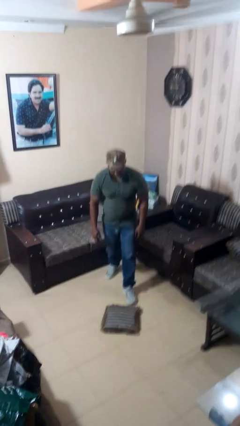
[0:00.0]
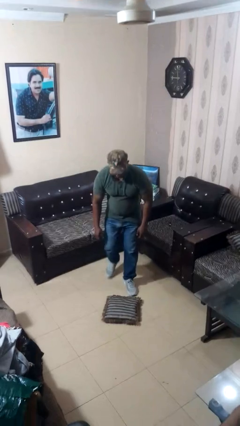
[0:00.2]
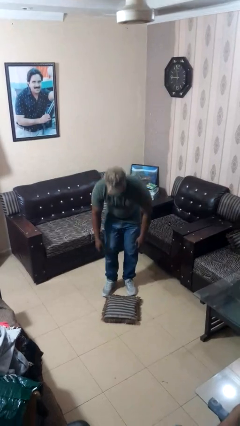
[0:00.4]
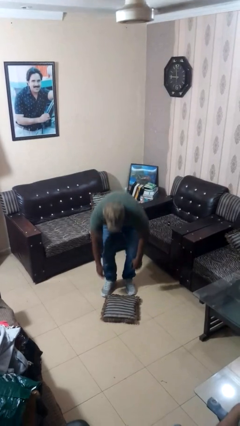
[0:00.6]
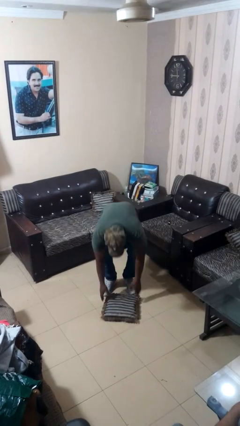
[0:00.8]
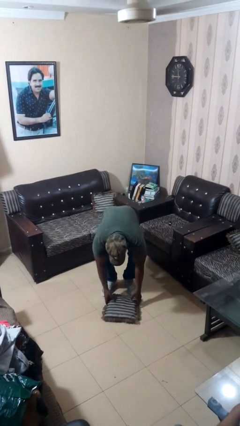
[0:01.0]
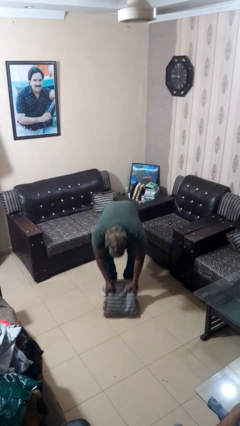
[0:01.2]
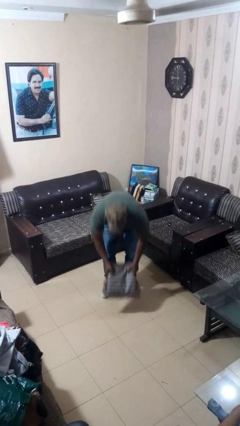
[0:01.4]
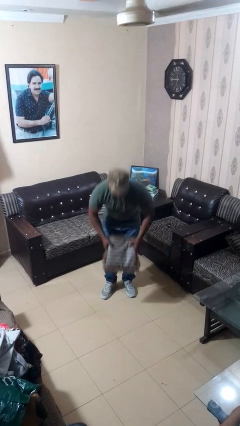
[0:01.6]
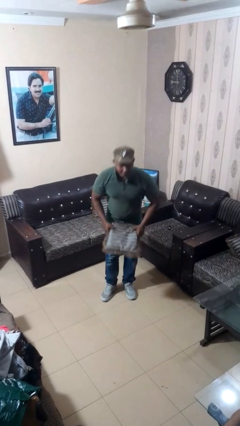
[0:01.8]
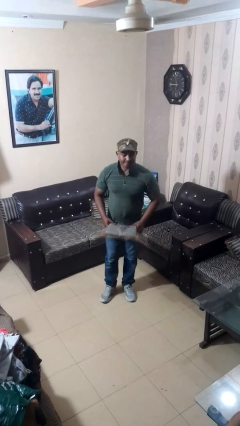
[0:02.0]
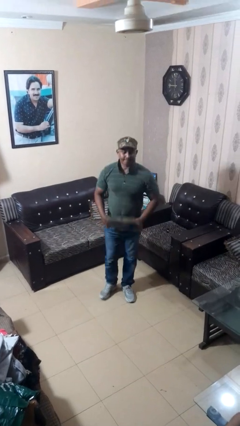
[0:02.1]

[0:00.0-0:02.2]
person picks up object from floor

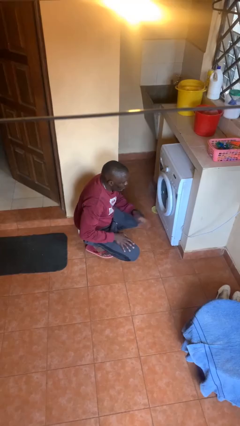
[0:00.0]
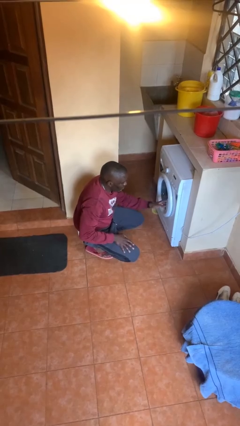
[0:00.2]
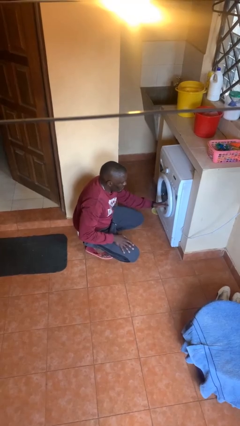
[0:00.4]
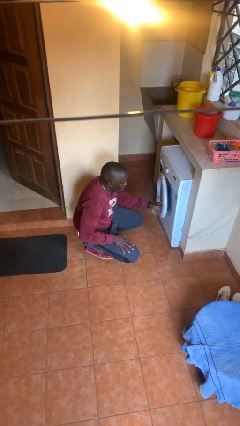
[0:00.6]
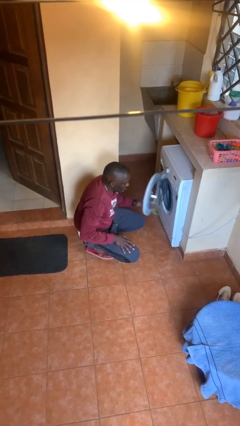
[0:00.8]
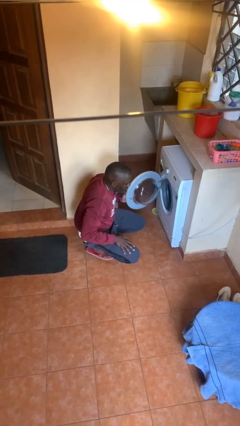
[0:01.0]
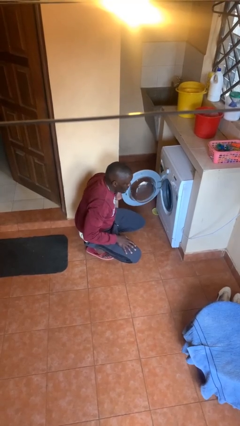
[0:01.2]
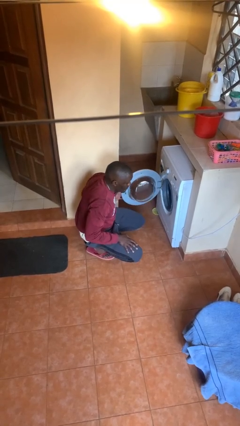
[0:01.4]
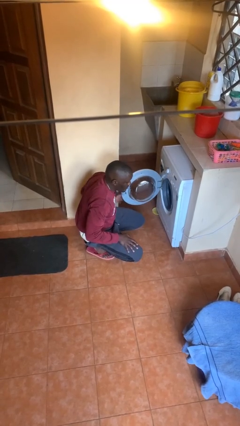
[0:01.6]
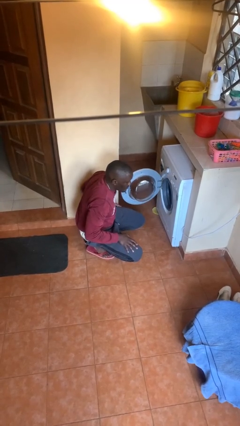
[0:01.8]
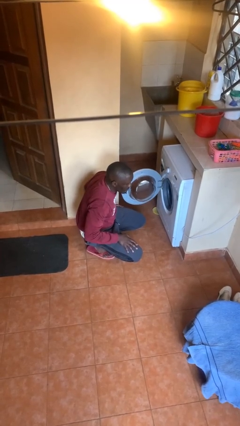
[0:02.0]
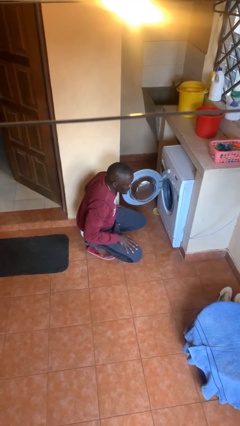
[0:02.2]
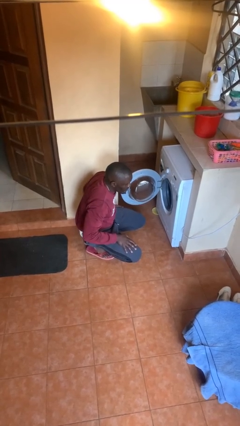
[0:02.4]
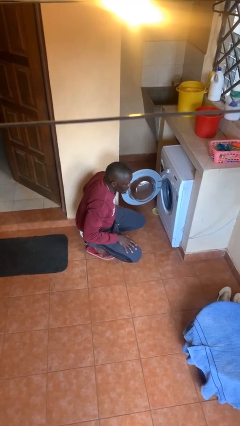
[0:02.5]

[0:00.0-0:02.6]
person opens clothes washer

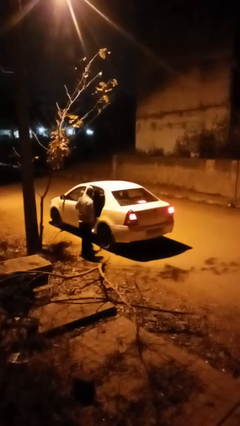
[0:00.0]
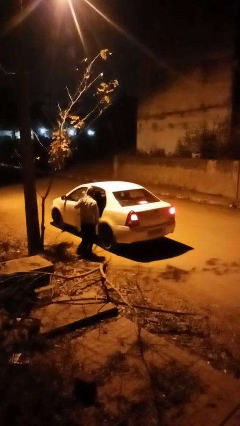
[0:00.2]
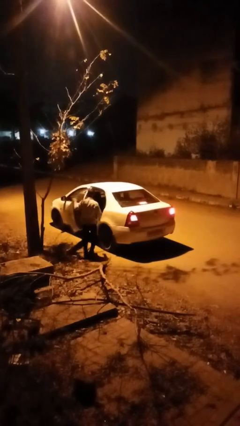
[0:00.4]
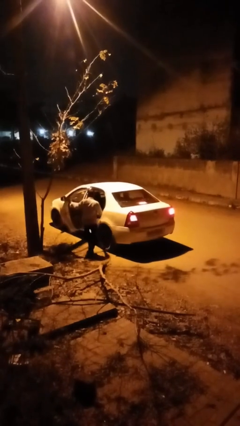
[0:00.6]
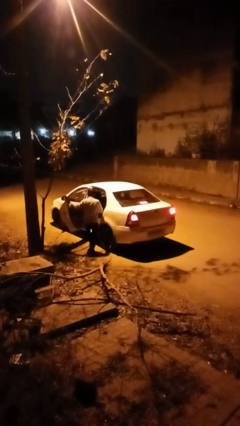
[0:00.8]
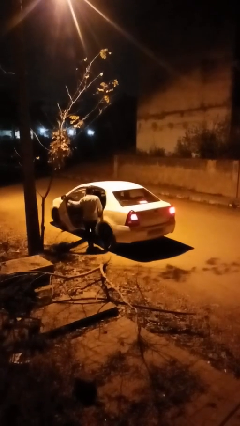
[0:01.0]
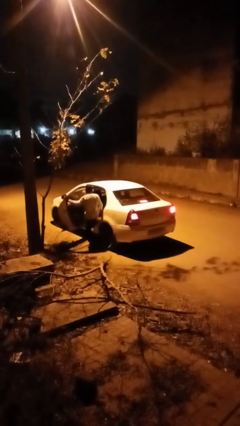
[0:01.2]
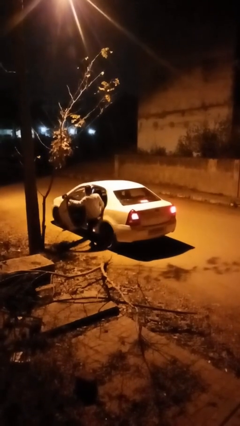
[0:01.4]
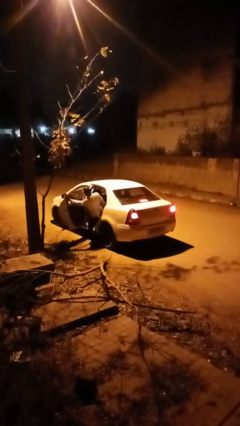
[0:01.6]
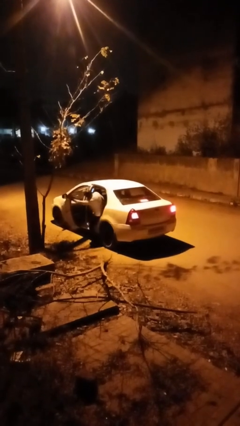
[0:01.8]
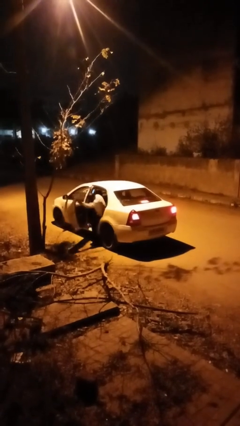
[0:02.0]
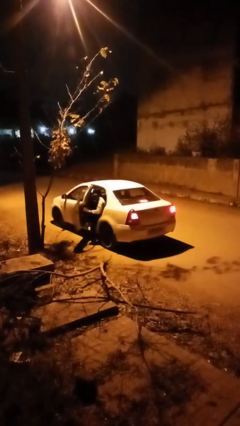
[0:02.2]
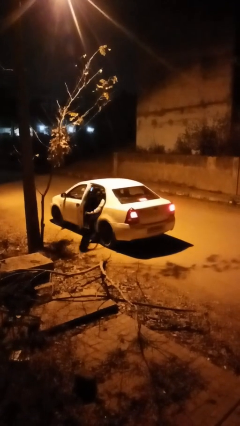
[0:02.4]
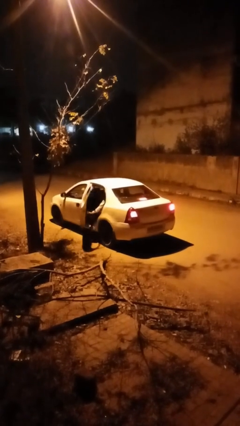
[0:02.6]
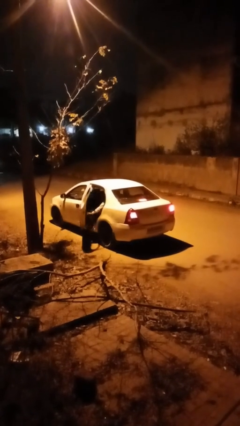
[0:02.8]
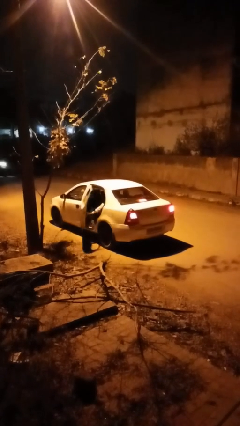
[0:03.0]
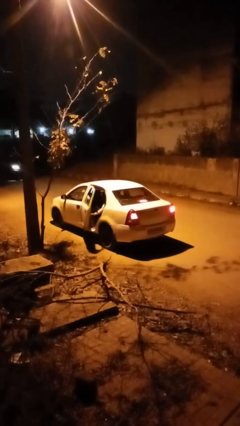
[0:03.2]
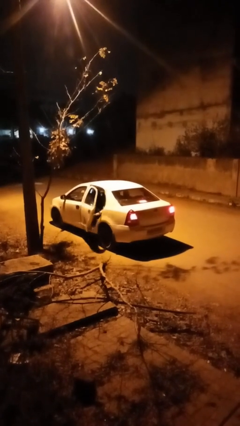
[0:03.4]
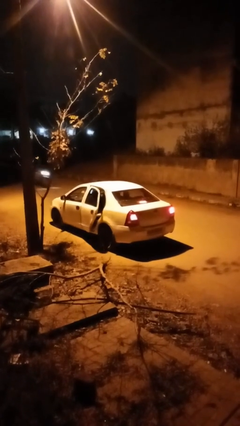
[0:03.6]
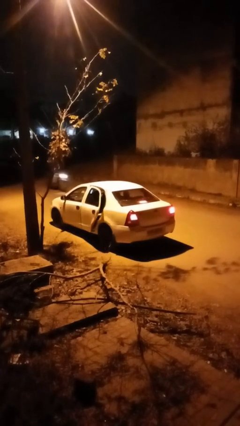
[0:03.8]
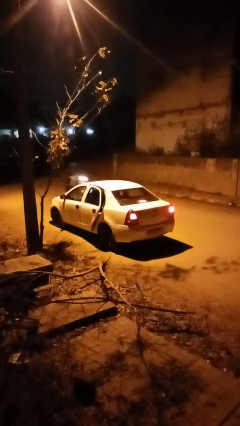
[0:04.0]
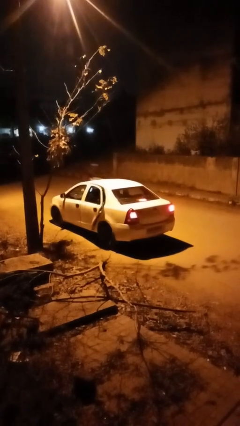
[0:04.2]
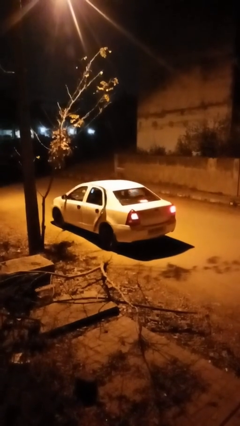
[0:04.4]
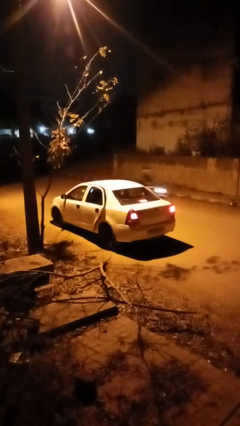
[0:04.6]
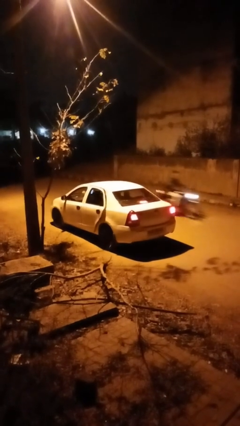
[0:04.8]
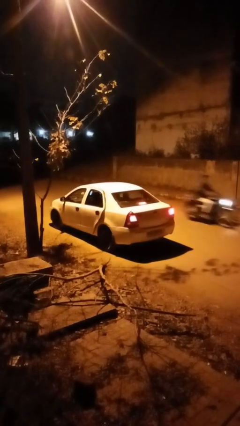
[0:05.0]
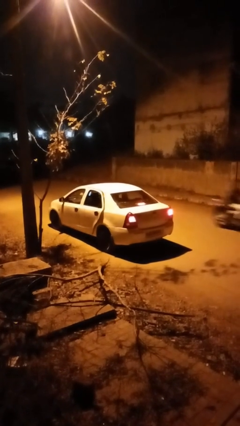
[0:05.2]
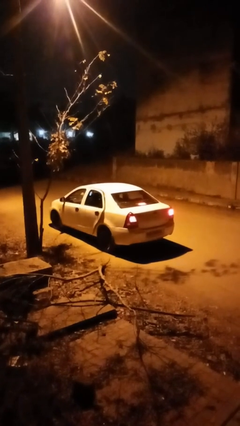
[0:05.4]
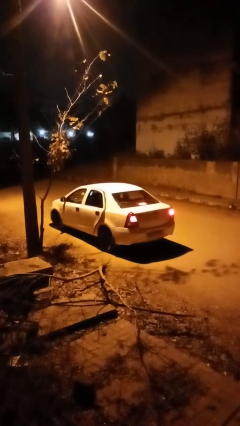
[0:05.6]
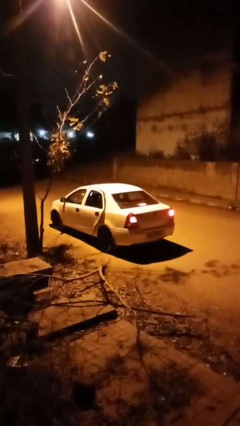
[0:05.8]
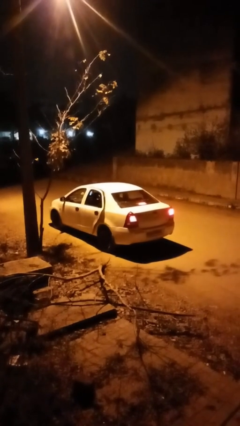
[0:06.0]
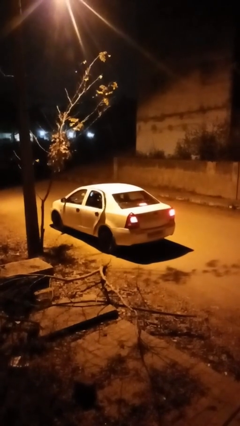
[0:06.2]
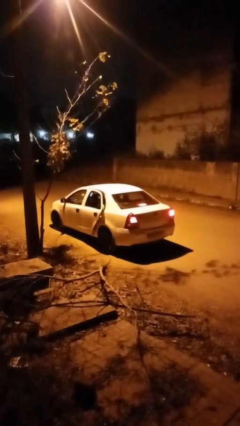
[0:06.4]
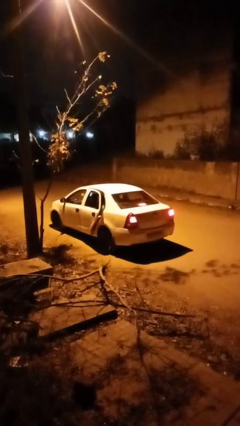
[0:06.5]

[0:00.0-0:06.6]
car picks up person

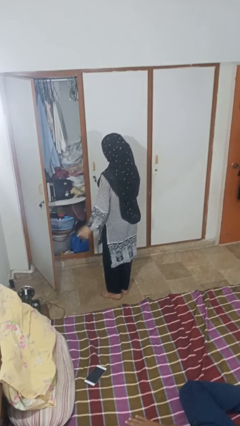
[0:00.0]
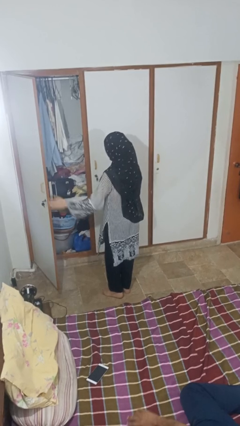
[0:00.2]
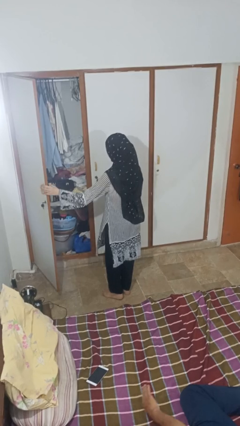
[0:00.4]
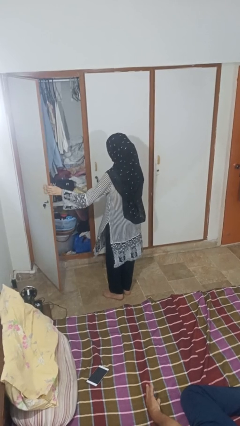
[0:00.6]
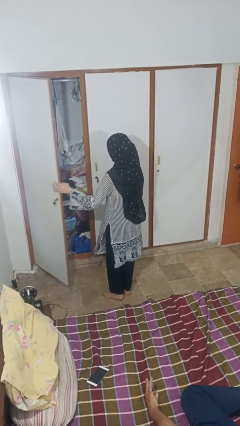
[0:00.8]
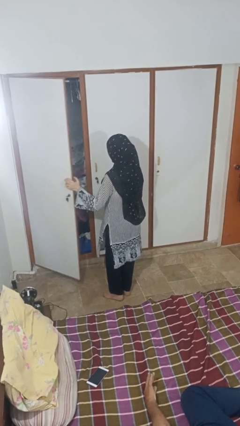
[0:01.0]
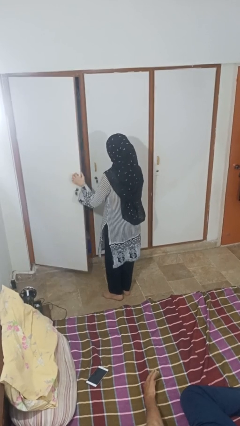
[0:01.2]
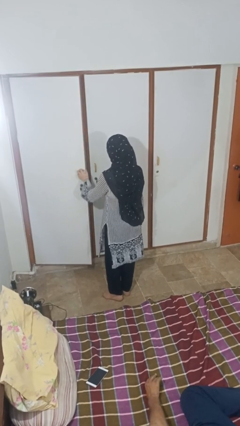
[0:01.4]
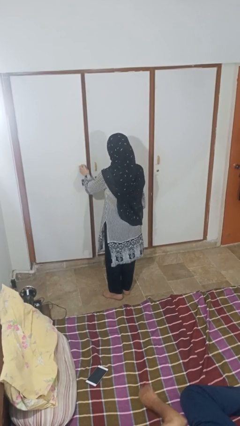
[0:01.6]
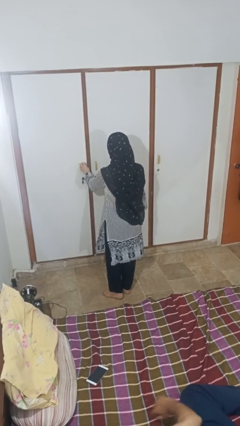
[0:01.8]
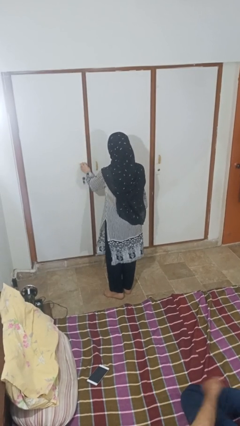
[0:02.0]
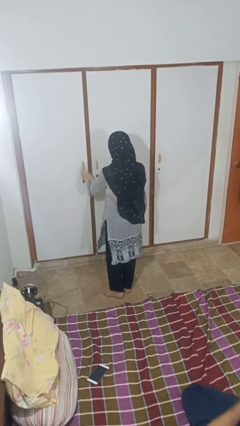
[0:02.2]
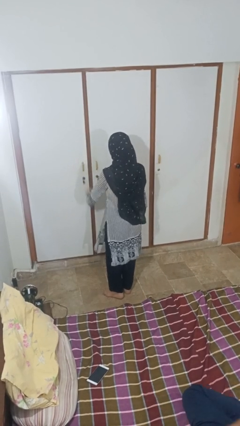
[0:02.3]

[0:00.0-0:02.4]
person closes closet door

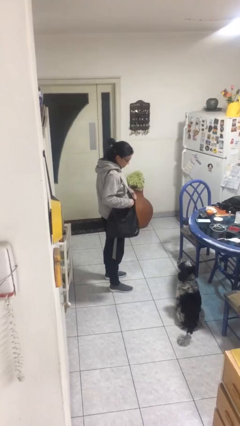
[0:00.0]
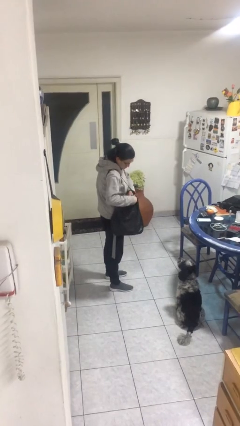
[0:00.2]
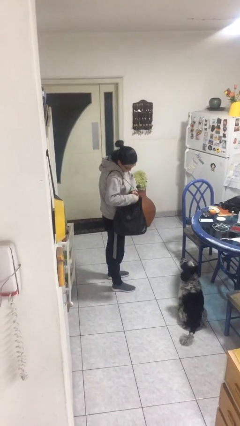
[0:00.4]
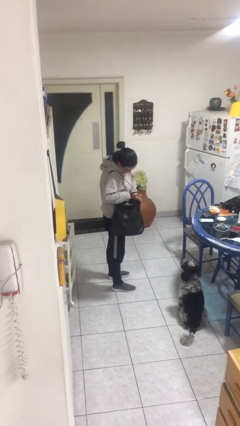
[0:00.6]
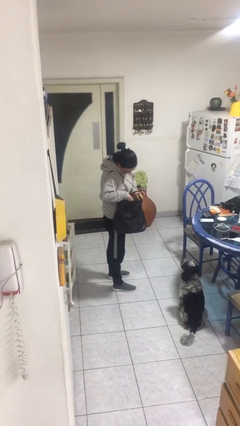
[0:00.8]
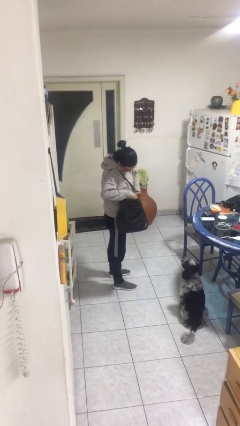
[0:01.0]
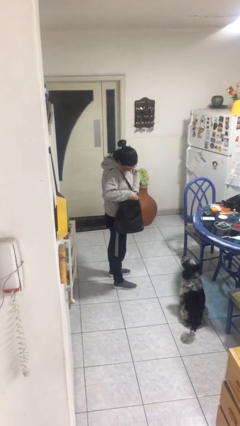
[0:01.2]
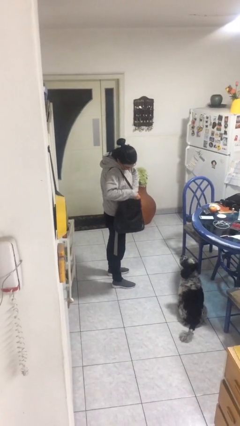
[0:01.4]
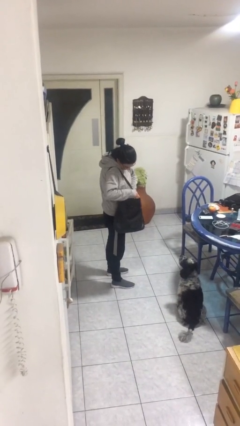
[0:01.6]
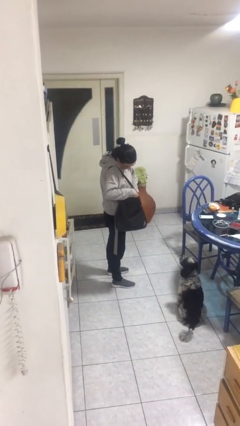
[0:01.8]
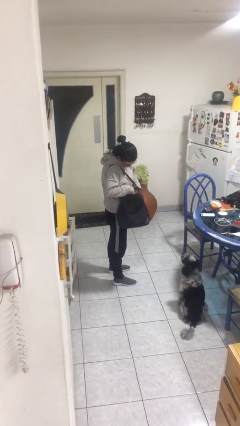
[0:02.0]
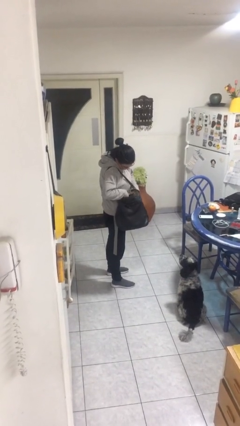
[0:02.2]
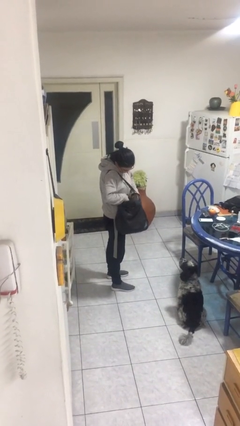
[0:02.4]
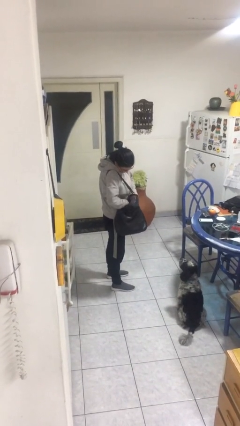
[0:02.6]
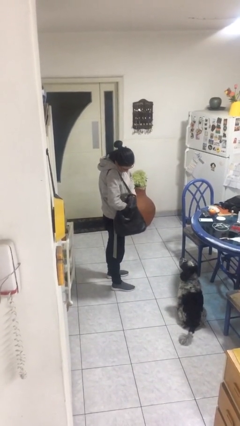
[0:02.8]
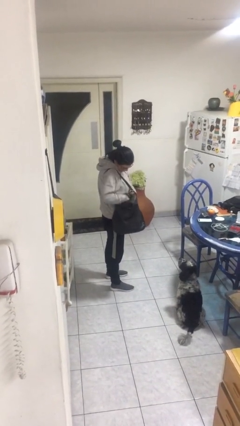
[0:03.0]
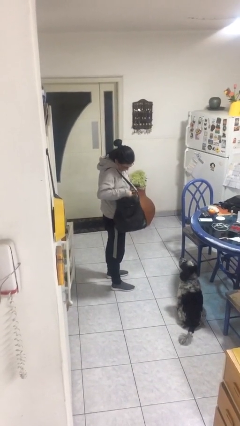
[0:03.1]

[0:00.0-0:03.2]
person searches in purse

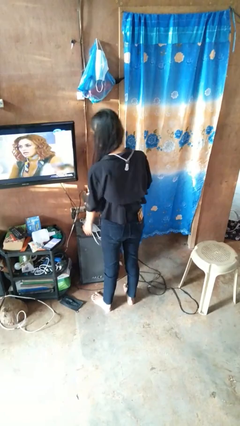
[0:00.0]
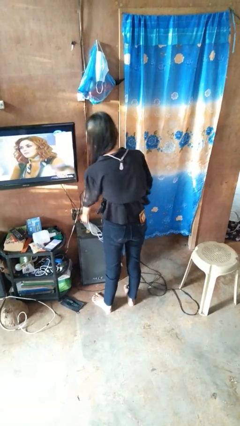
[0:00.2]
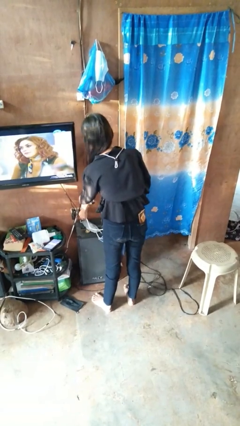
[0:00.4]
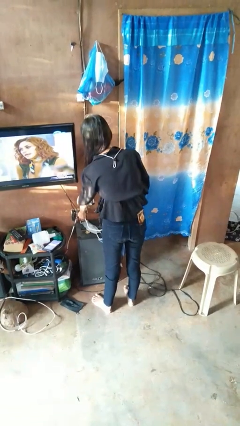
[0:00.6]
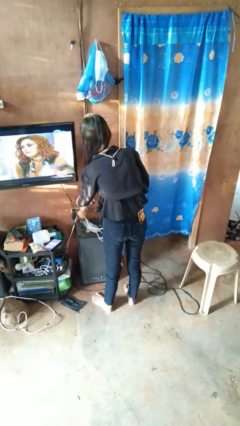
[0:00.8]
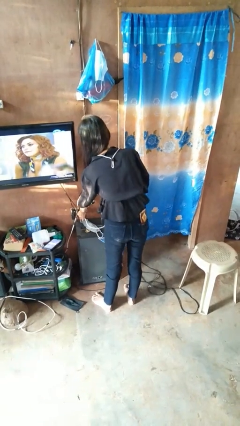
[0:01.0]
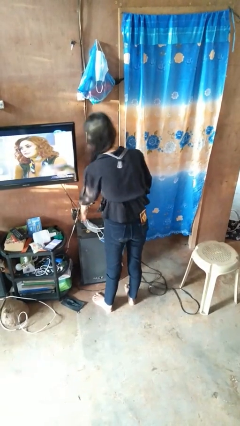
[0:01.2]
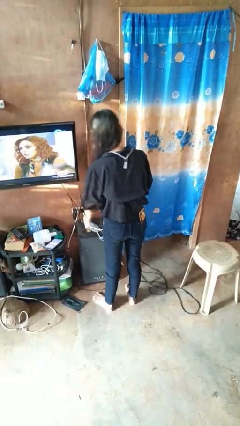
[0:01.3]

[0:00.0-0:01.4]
person plugs into electrical socket
